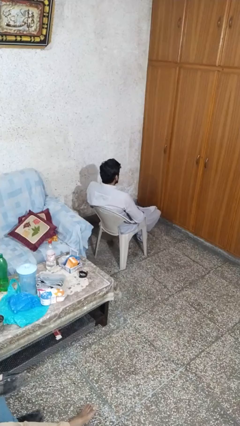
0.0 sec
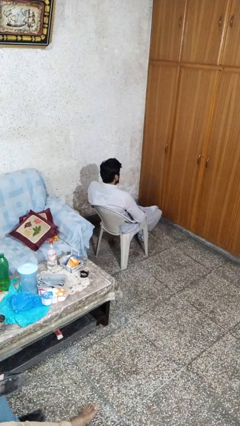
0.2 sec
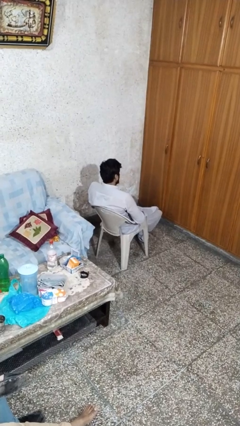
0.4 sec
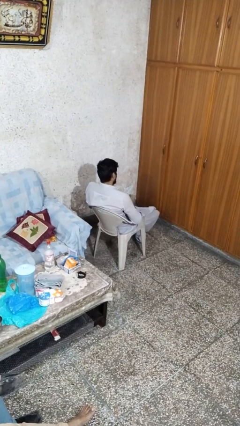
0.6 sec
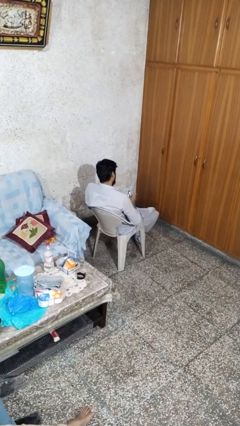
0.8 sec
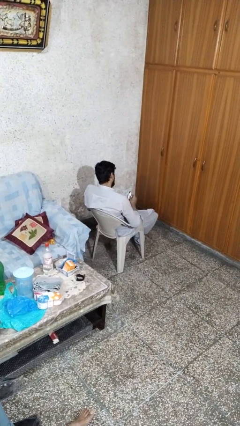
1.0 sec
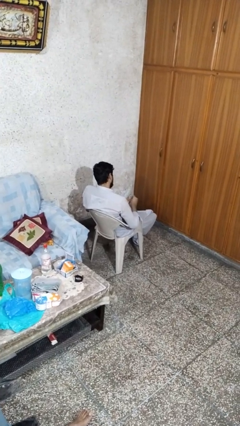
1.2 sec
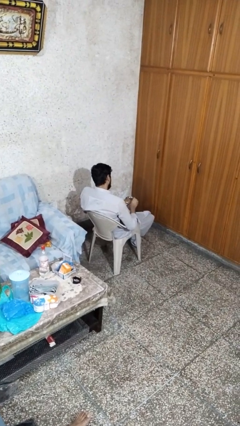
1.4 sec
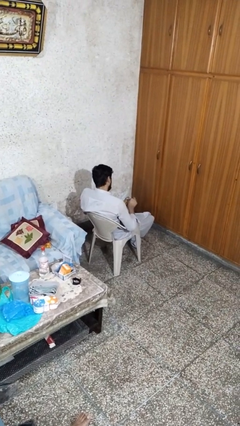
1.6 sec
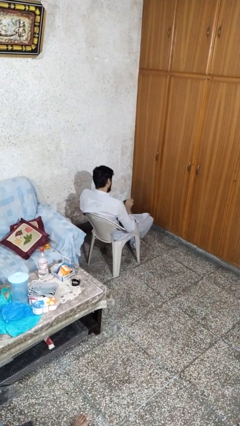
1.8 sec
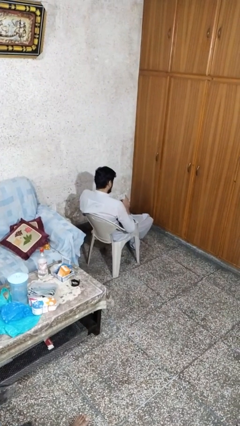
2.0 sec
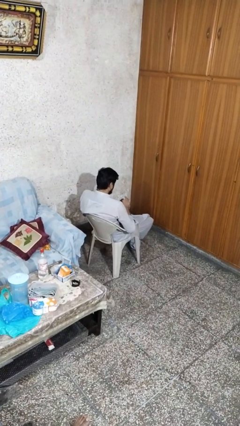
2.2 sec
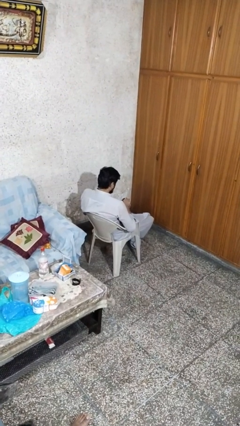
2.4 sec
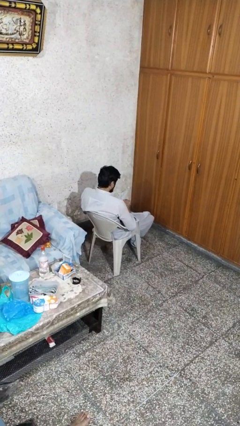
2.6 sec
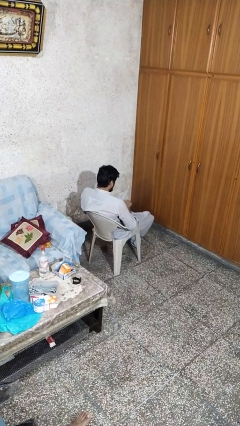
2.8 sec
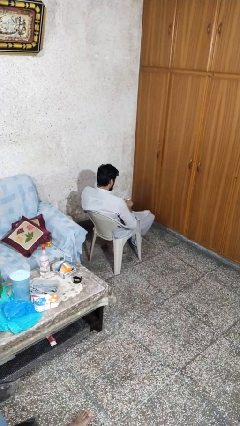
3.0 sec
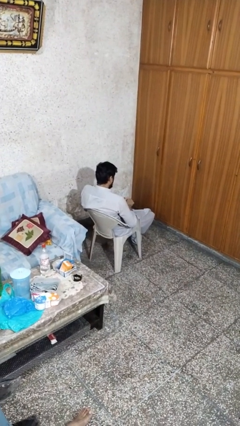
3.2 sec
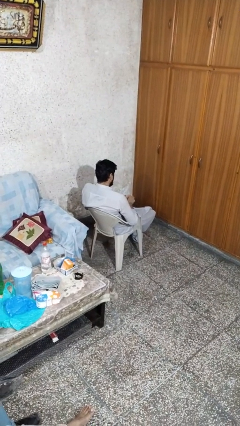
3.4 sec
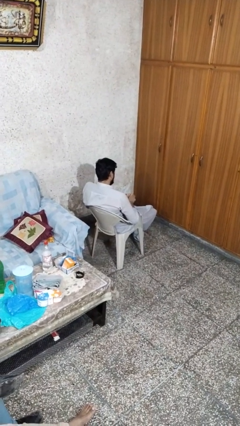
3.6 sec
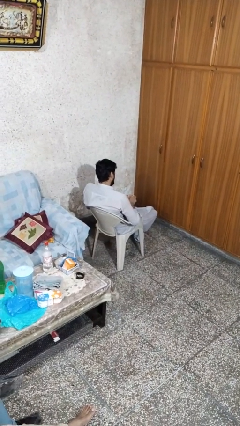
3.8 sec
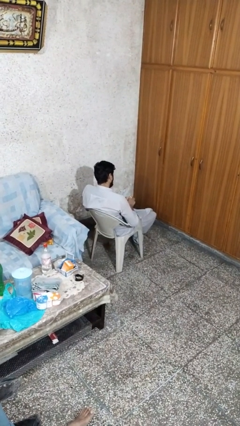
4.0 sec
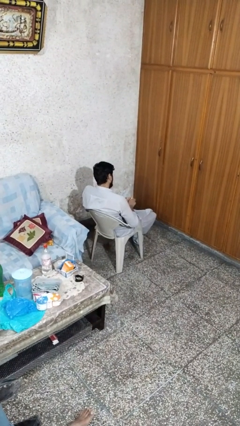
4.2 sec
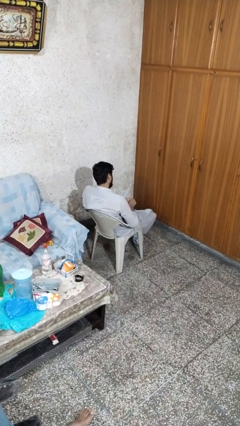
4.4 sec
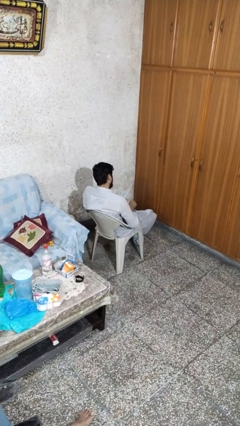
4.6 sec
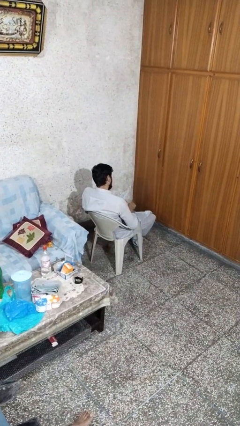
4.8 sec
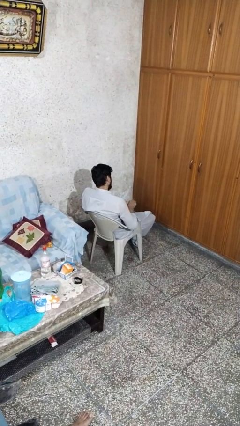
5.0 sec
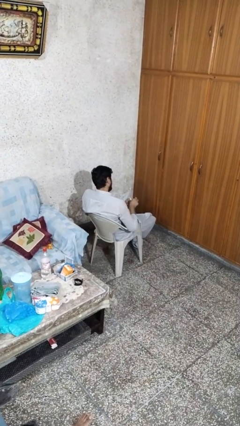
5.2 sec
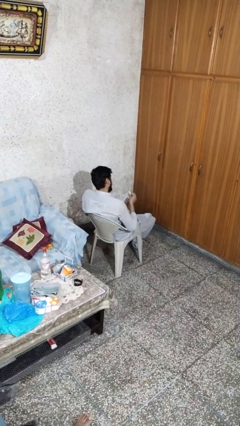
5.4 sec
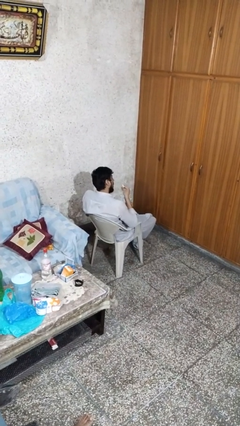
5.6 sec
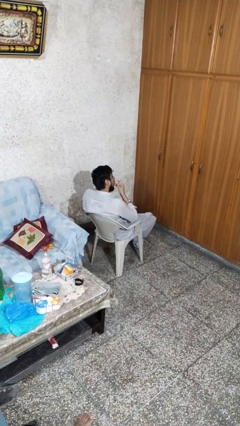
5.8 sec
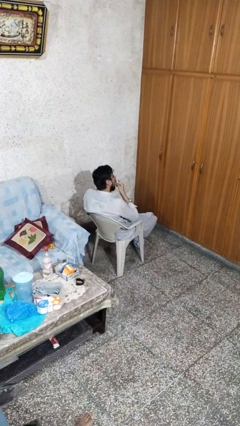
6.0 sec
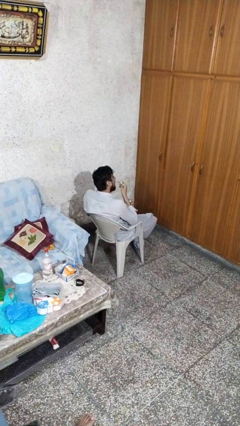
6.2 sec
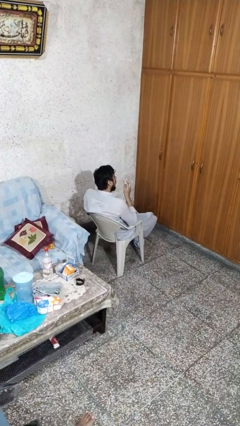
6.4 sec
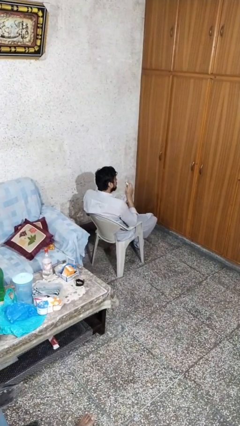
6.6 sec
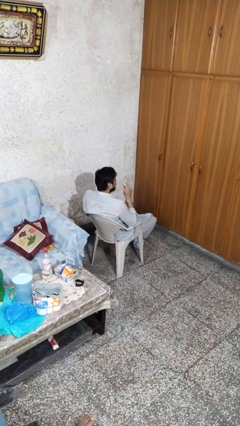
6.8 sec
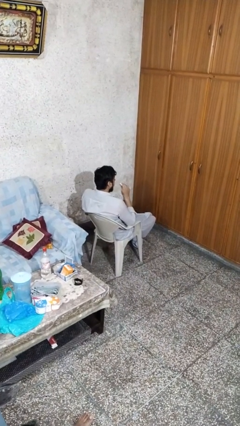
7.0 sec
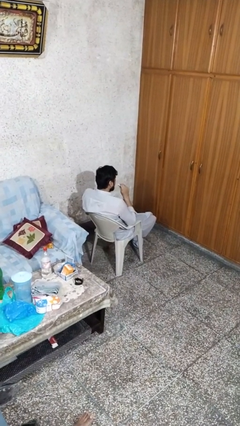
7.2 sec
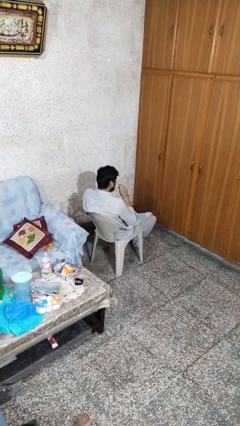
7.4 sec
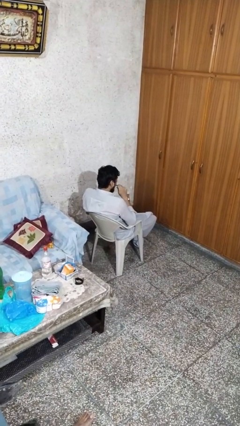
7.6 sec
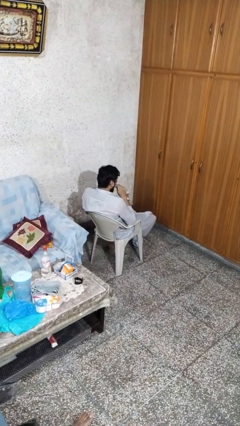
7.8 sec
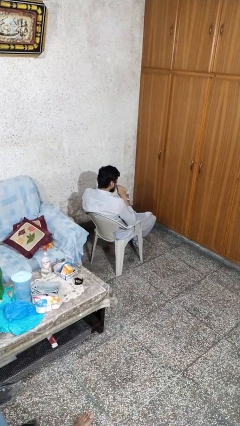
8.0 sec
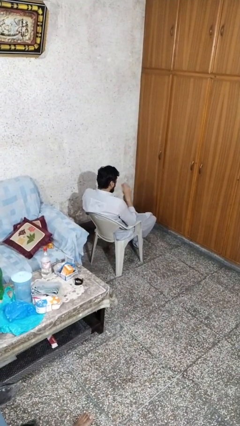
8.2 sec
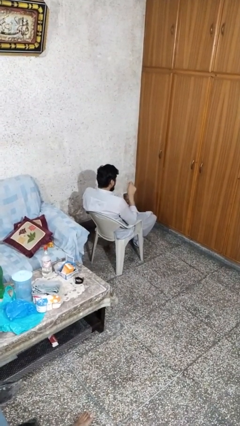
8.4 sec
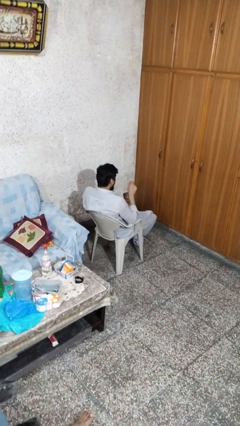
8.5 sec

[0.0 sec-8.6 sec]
person eats snack from bag

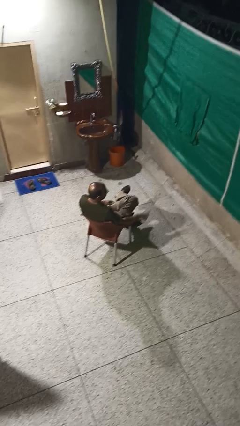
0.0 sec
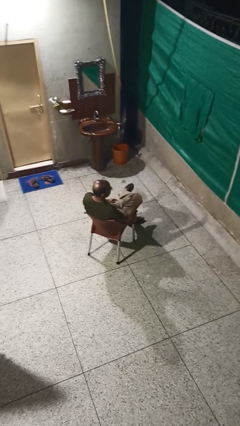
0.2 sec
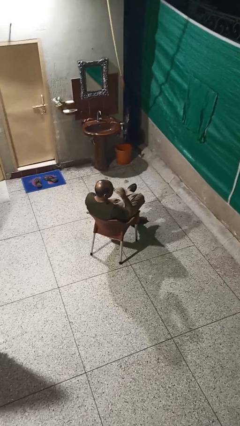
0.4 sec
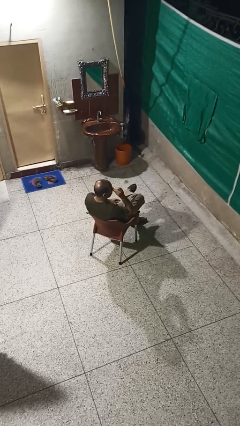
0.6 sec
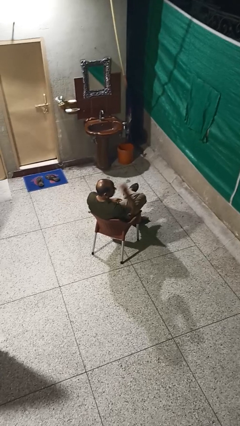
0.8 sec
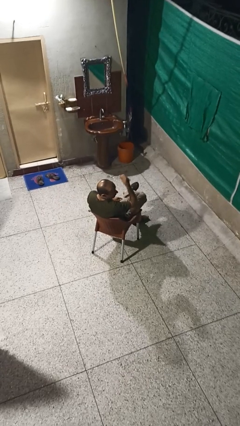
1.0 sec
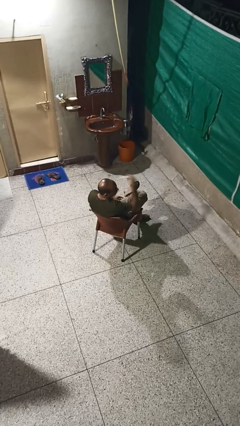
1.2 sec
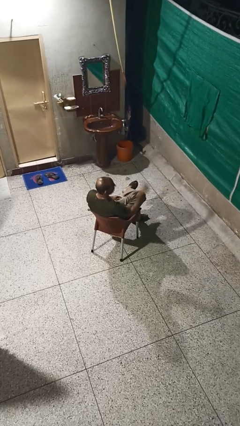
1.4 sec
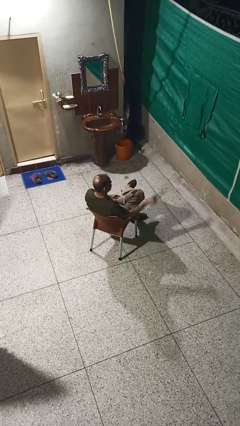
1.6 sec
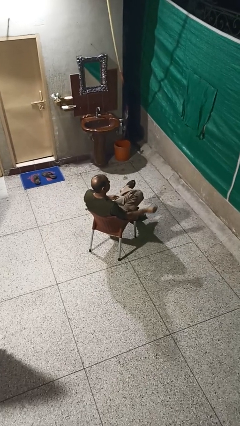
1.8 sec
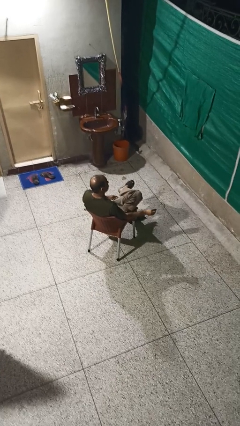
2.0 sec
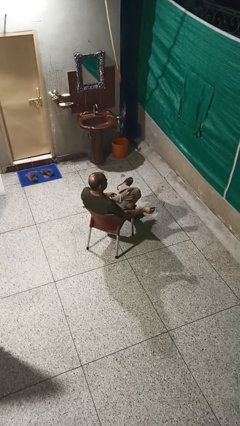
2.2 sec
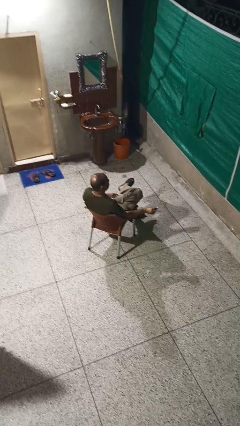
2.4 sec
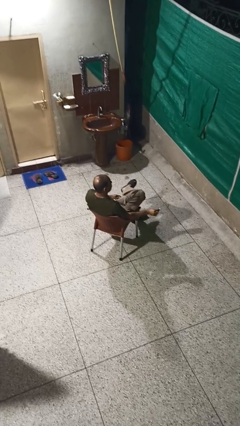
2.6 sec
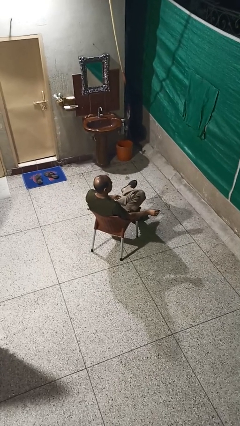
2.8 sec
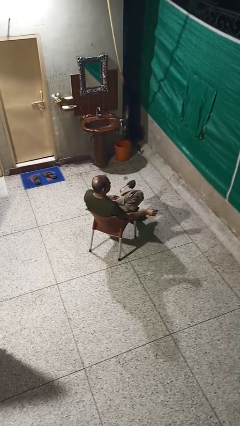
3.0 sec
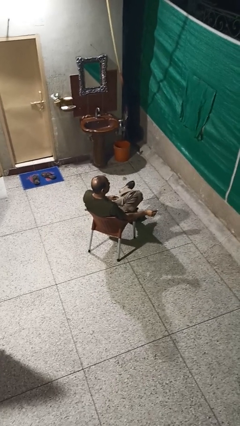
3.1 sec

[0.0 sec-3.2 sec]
person takes off glasses

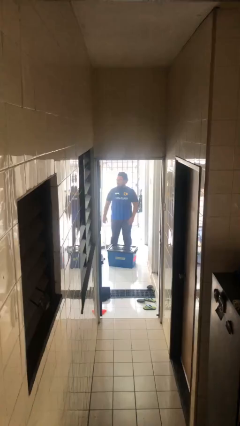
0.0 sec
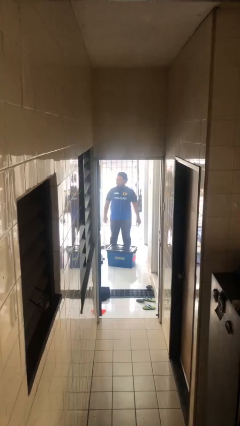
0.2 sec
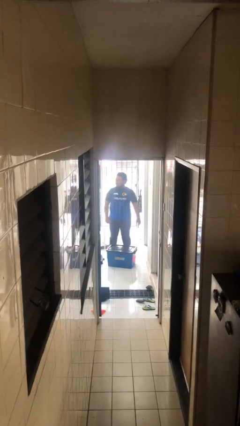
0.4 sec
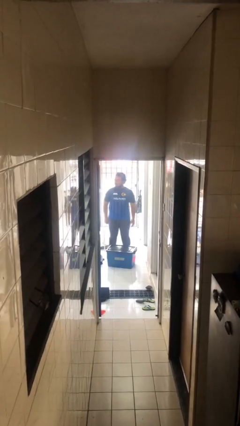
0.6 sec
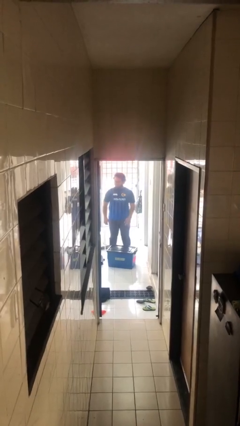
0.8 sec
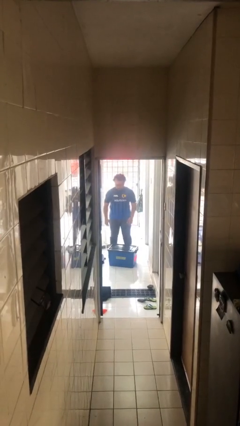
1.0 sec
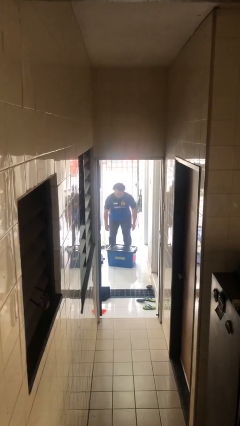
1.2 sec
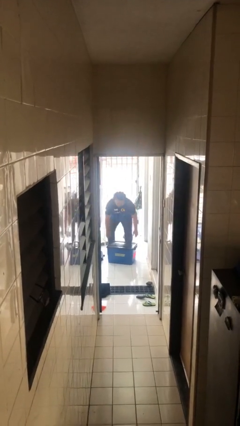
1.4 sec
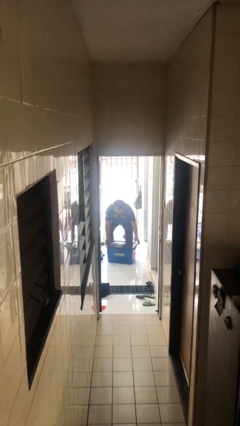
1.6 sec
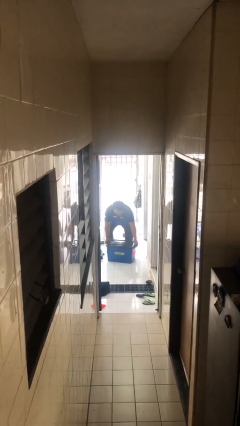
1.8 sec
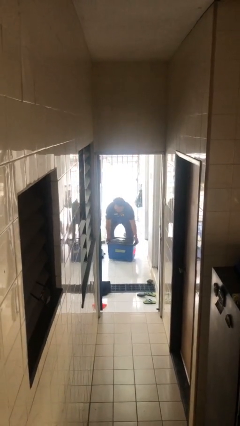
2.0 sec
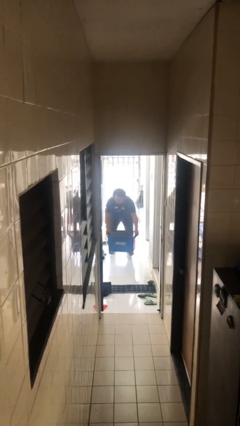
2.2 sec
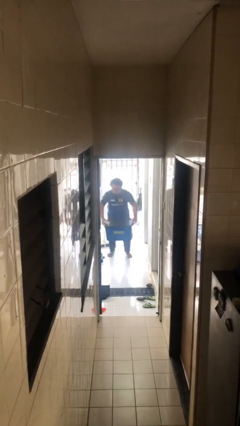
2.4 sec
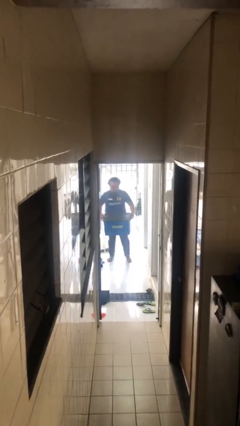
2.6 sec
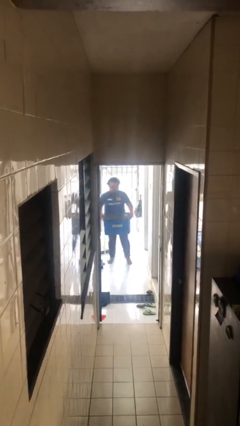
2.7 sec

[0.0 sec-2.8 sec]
person picks up object from floor

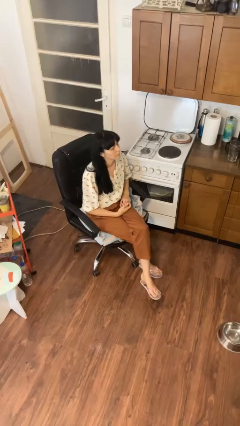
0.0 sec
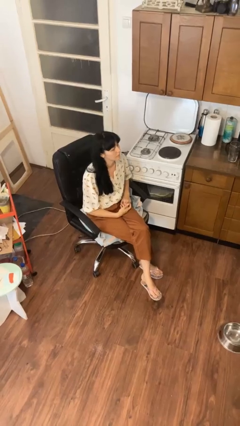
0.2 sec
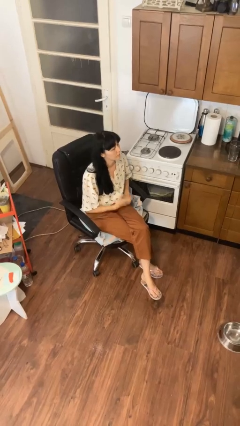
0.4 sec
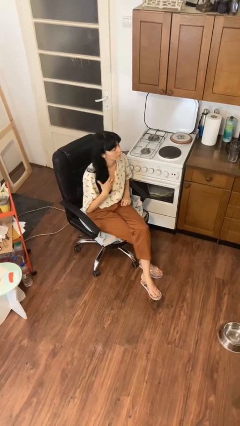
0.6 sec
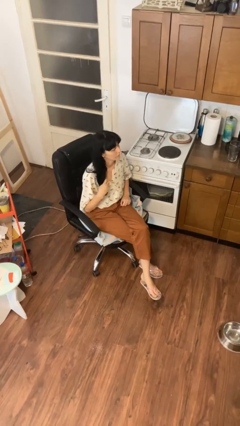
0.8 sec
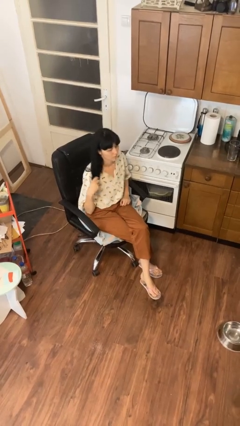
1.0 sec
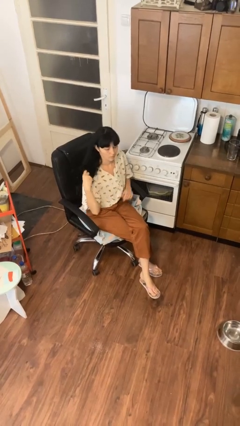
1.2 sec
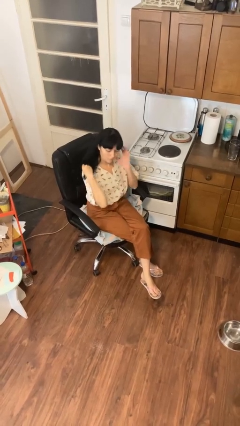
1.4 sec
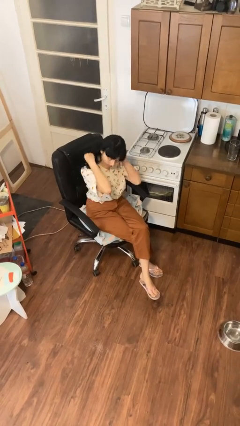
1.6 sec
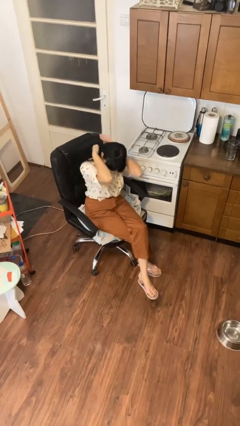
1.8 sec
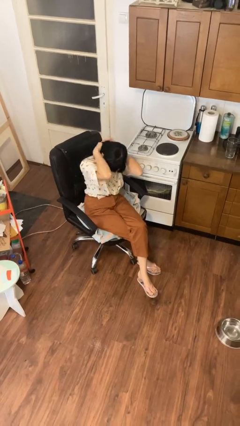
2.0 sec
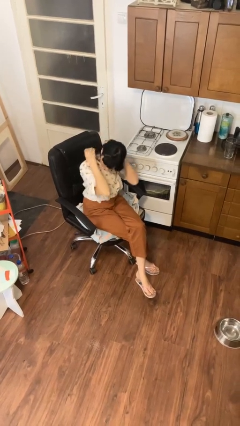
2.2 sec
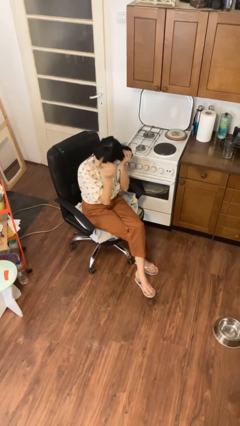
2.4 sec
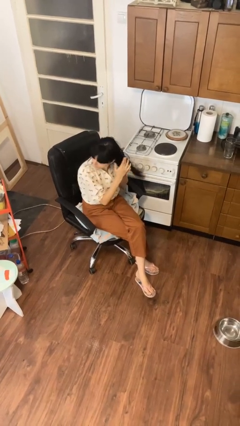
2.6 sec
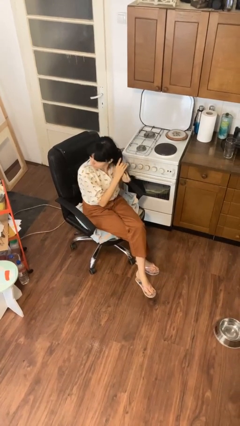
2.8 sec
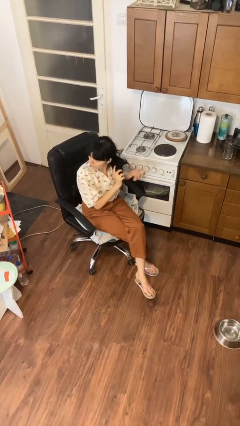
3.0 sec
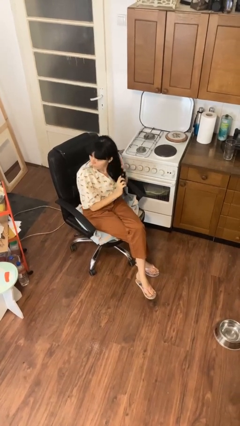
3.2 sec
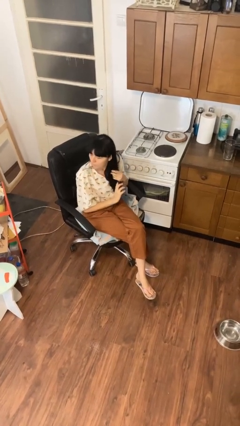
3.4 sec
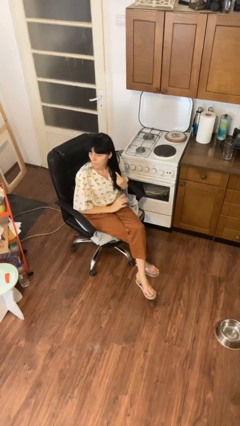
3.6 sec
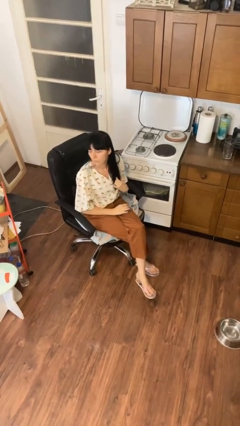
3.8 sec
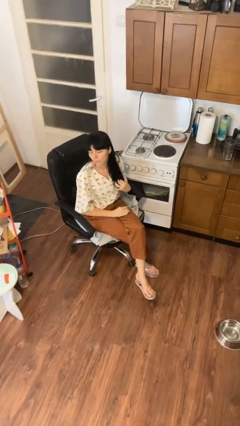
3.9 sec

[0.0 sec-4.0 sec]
person strokes hair
